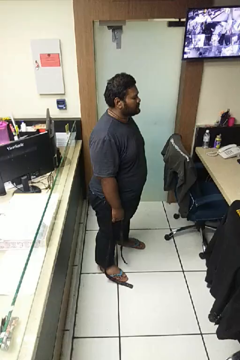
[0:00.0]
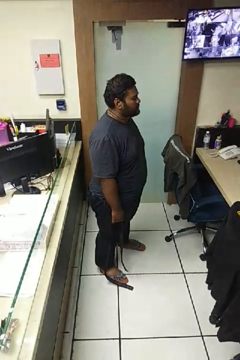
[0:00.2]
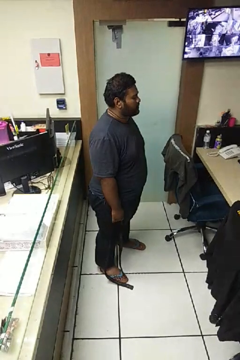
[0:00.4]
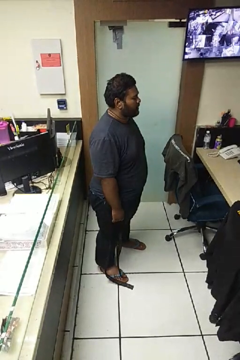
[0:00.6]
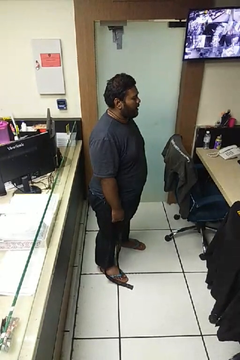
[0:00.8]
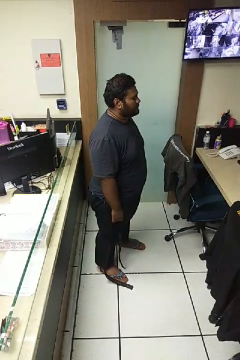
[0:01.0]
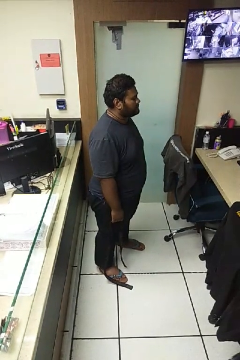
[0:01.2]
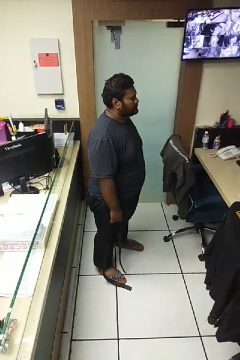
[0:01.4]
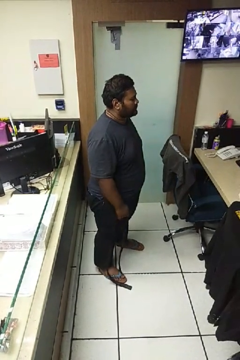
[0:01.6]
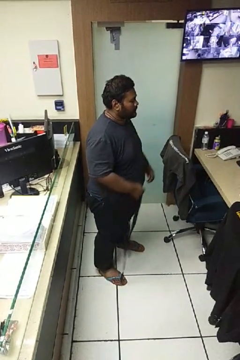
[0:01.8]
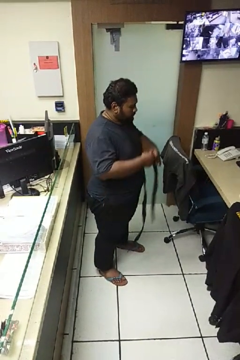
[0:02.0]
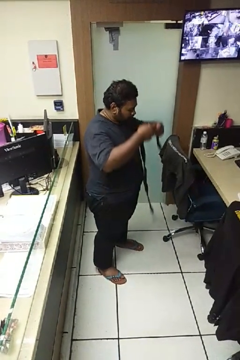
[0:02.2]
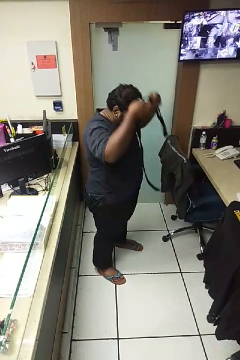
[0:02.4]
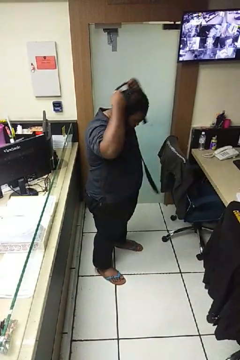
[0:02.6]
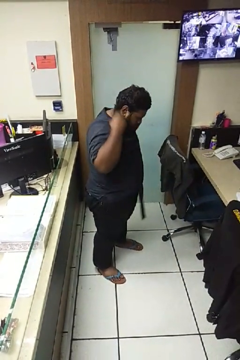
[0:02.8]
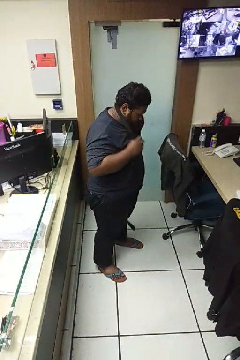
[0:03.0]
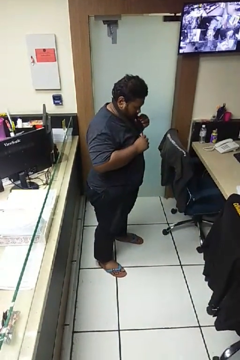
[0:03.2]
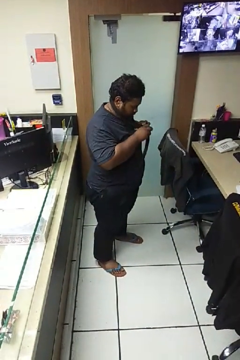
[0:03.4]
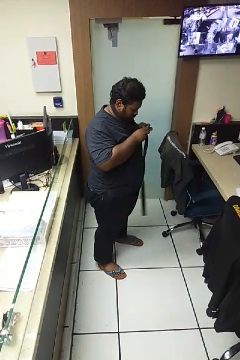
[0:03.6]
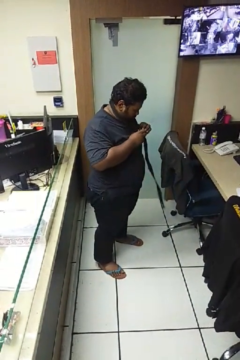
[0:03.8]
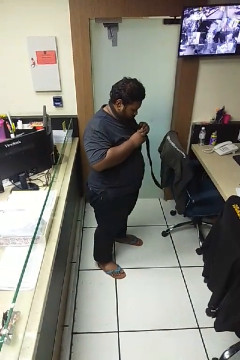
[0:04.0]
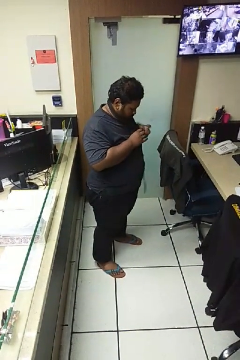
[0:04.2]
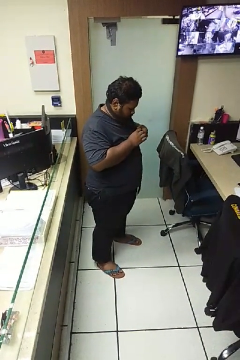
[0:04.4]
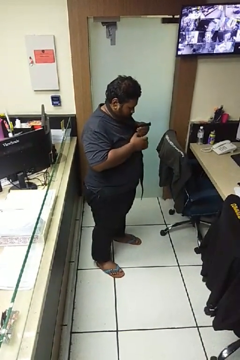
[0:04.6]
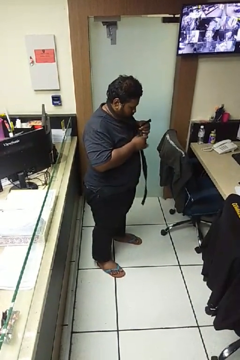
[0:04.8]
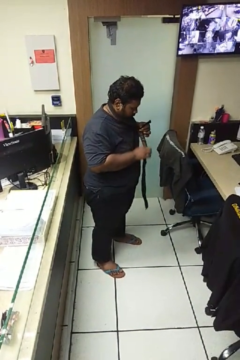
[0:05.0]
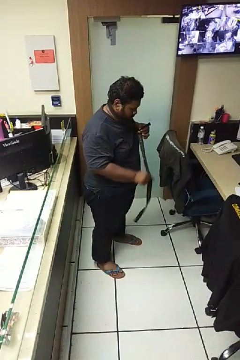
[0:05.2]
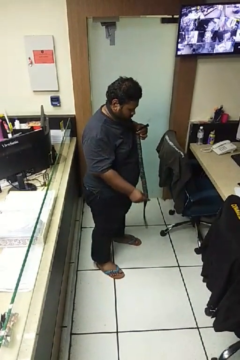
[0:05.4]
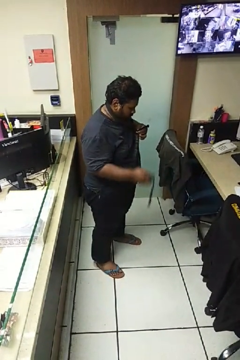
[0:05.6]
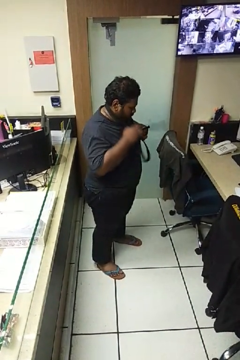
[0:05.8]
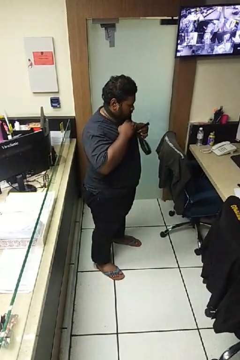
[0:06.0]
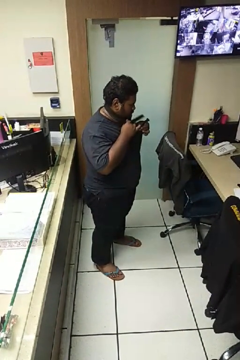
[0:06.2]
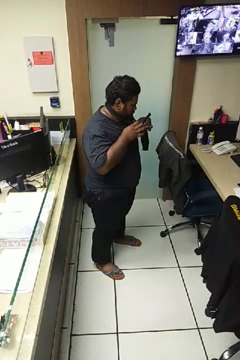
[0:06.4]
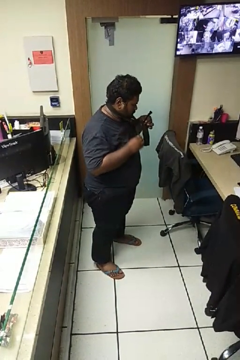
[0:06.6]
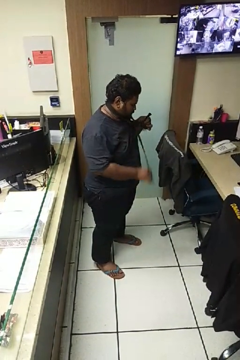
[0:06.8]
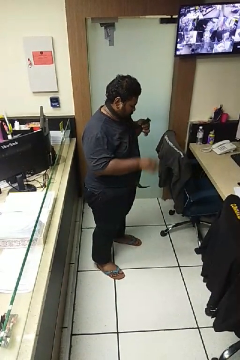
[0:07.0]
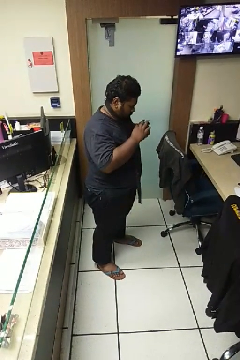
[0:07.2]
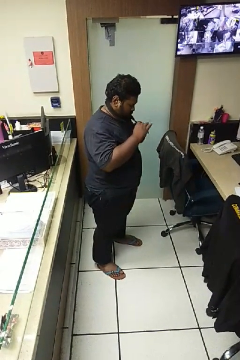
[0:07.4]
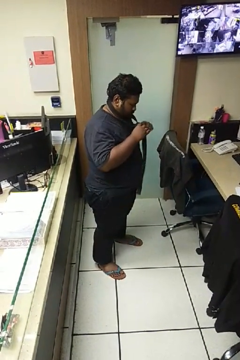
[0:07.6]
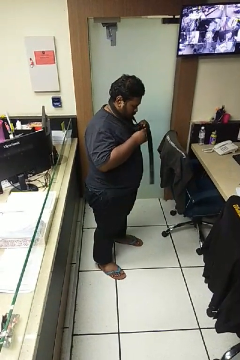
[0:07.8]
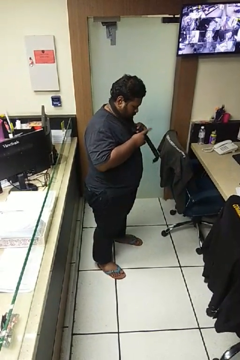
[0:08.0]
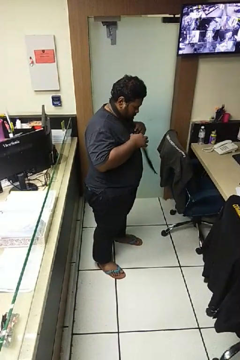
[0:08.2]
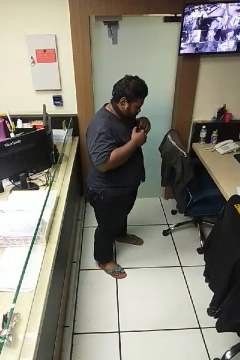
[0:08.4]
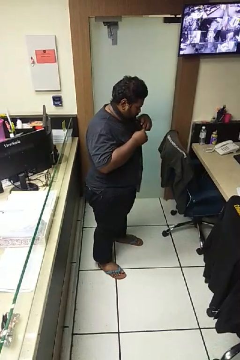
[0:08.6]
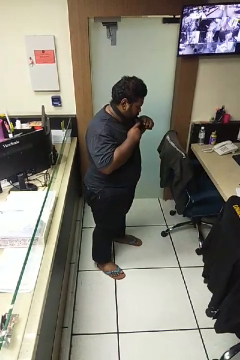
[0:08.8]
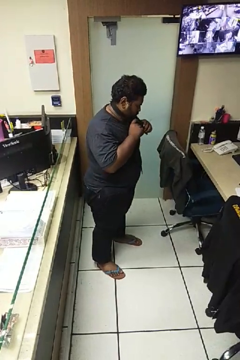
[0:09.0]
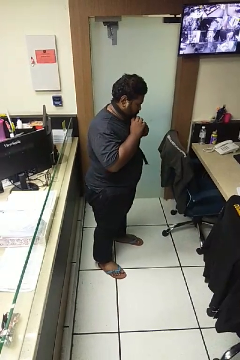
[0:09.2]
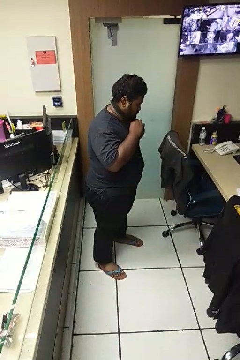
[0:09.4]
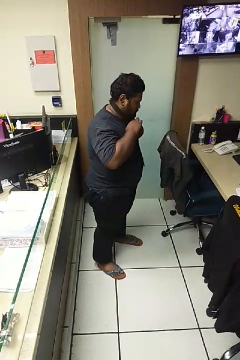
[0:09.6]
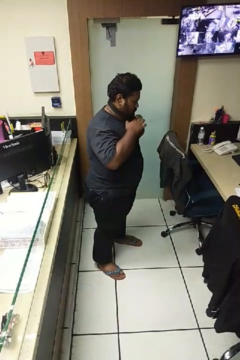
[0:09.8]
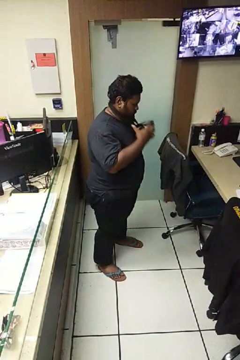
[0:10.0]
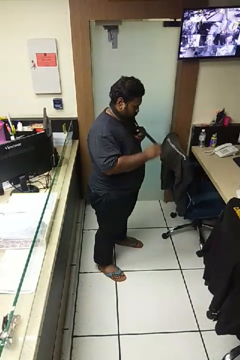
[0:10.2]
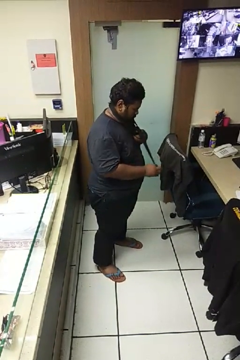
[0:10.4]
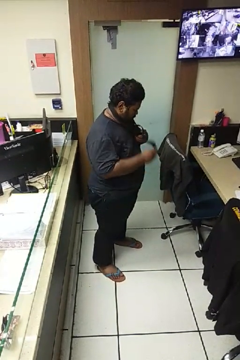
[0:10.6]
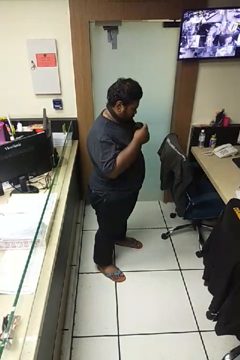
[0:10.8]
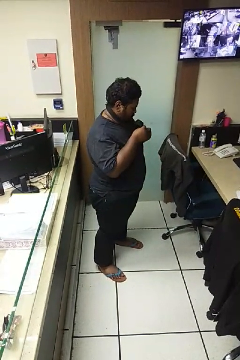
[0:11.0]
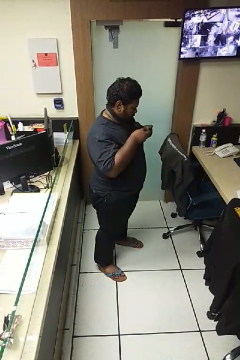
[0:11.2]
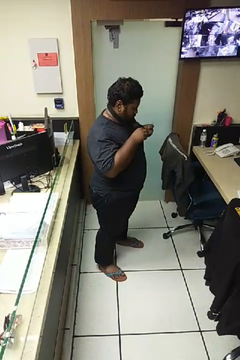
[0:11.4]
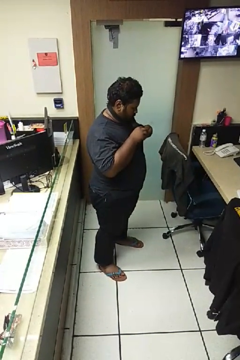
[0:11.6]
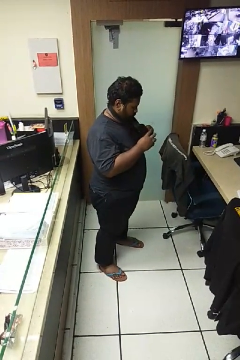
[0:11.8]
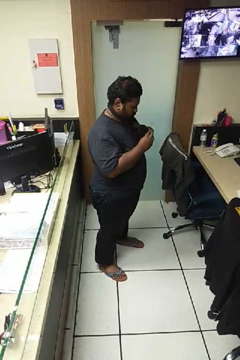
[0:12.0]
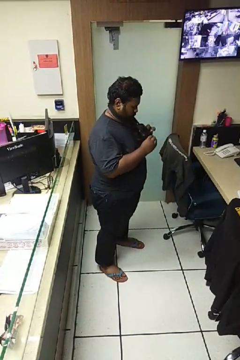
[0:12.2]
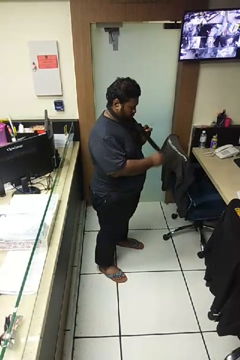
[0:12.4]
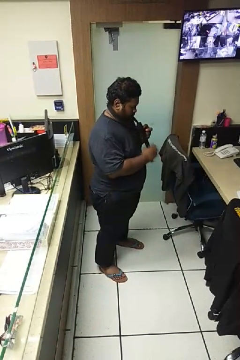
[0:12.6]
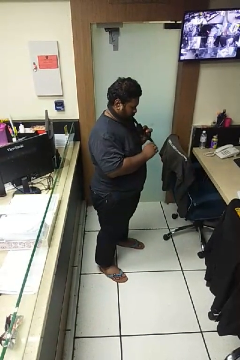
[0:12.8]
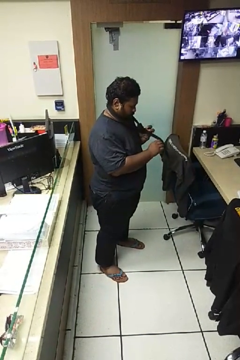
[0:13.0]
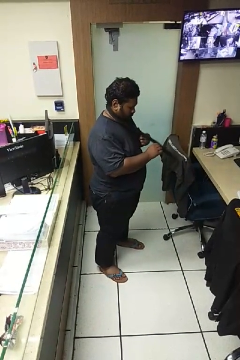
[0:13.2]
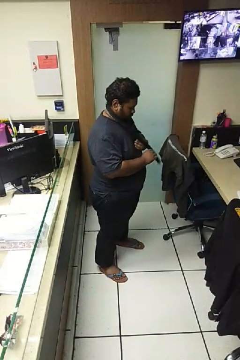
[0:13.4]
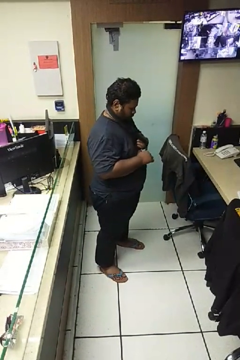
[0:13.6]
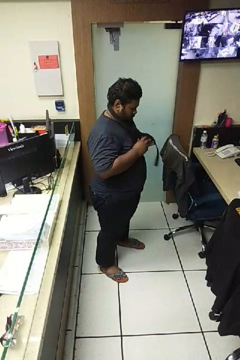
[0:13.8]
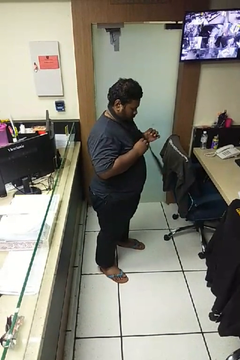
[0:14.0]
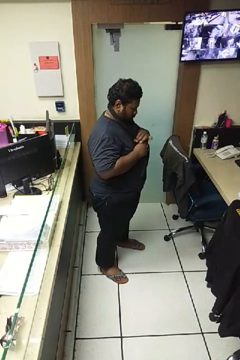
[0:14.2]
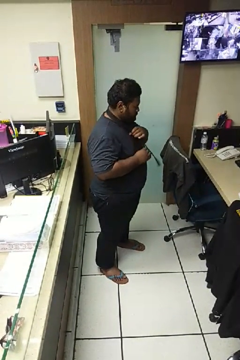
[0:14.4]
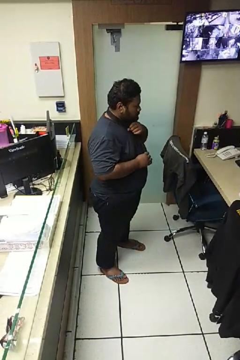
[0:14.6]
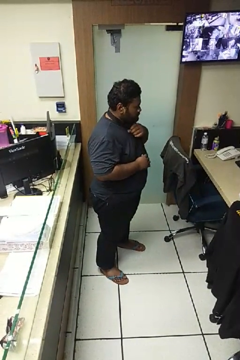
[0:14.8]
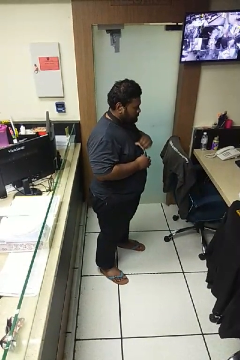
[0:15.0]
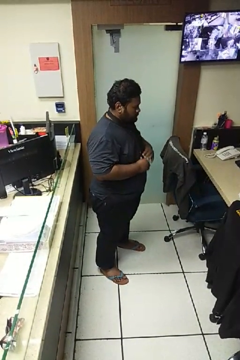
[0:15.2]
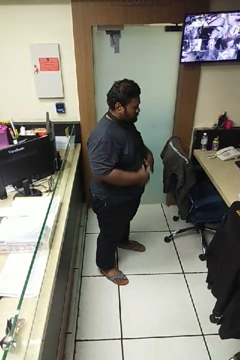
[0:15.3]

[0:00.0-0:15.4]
person puts on necktie

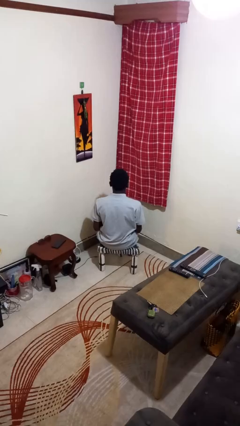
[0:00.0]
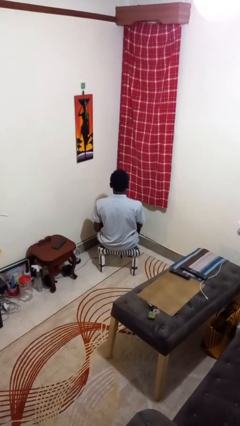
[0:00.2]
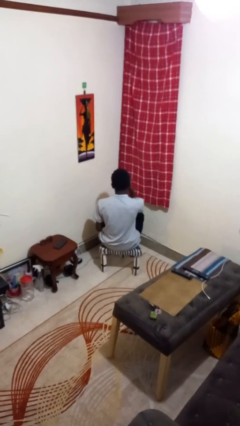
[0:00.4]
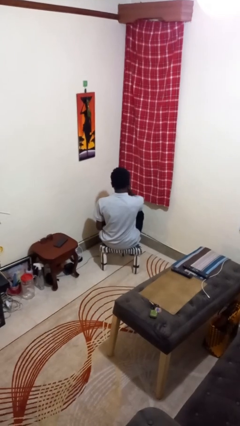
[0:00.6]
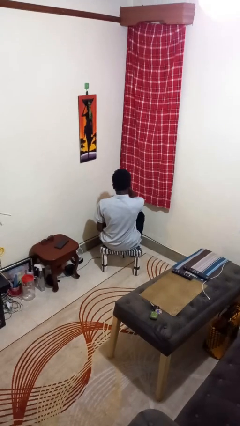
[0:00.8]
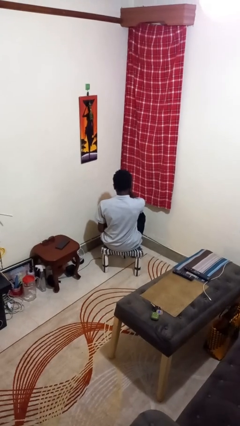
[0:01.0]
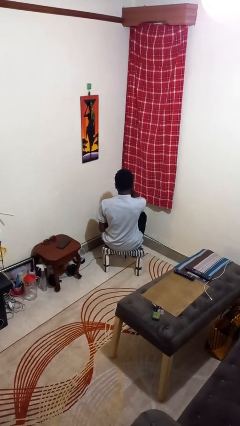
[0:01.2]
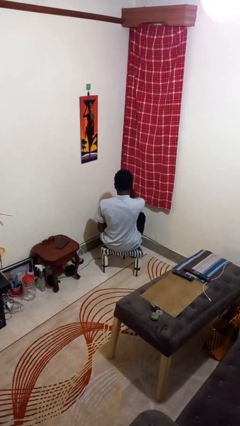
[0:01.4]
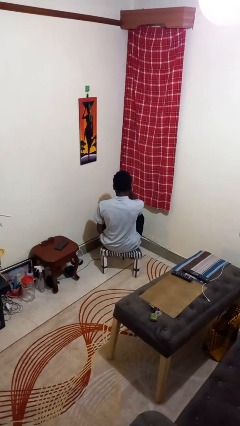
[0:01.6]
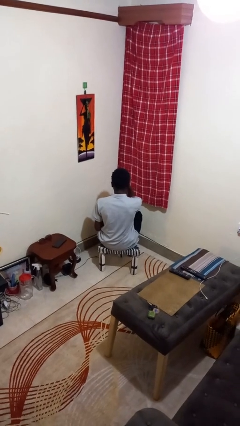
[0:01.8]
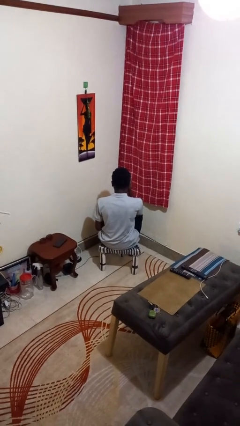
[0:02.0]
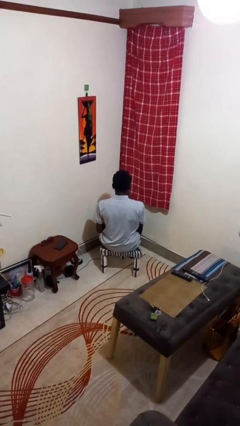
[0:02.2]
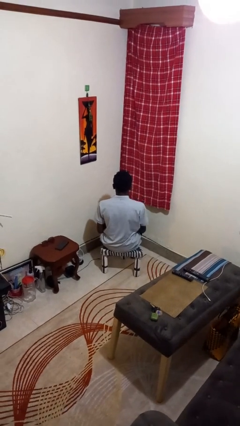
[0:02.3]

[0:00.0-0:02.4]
person scratches face

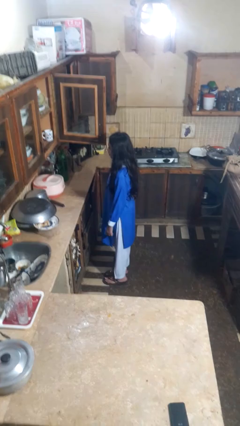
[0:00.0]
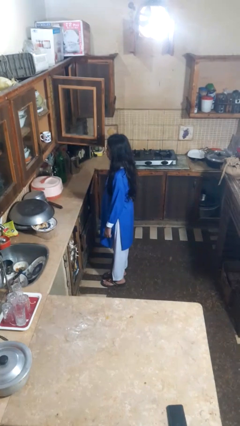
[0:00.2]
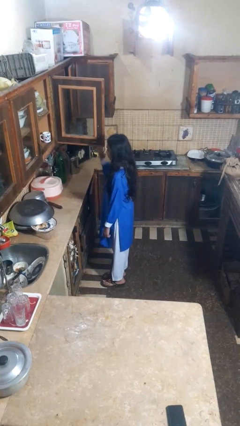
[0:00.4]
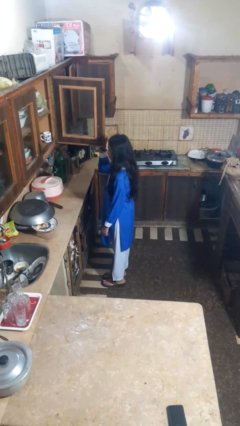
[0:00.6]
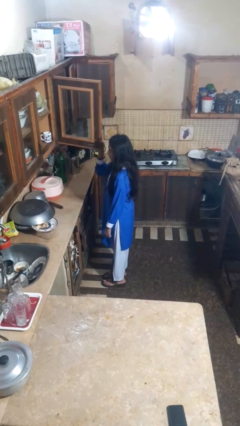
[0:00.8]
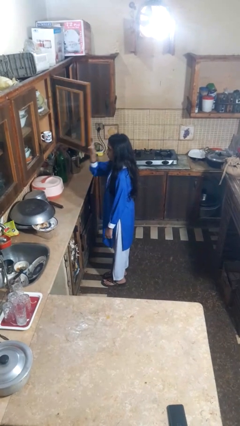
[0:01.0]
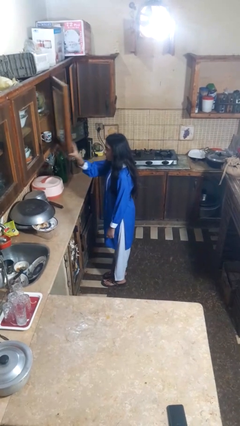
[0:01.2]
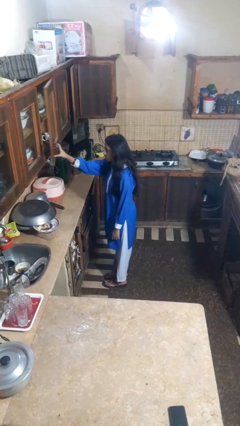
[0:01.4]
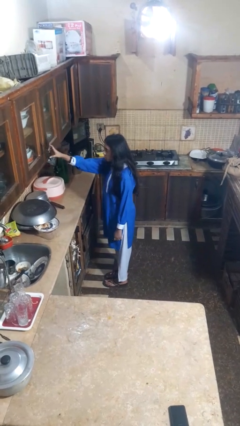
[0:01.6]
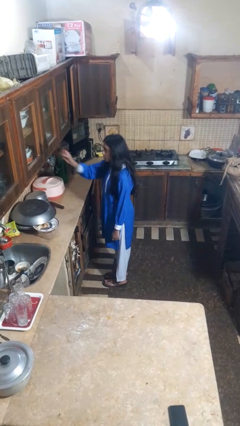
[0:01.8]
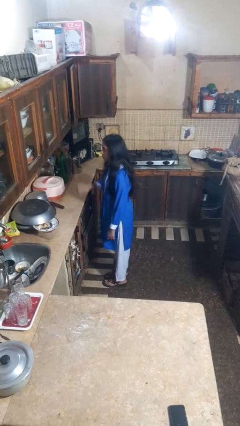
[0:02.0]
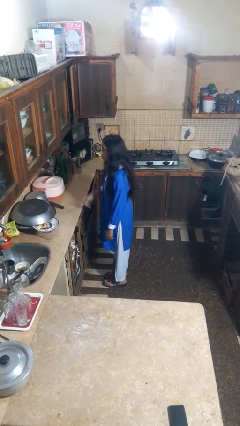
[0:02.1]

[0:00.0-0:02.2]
person closes cabinet

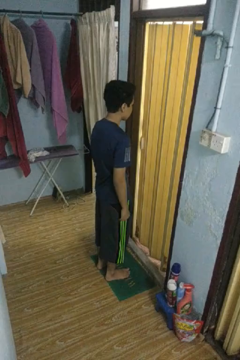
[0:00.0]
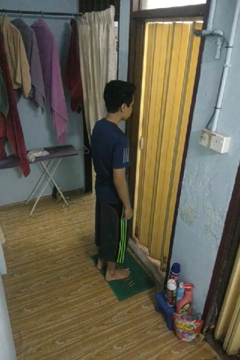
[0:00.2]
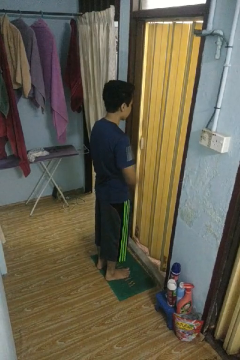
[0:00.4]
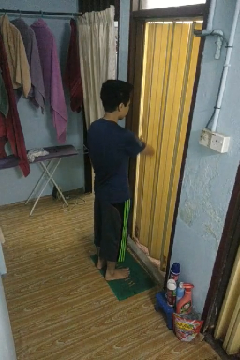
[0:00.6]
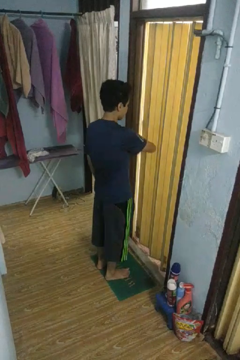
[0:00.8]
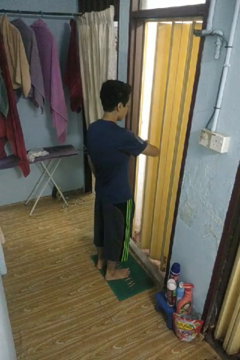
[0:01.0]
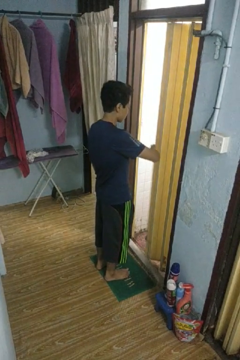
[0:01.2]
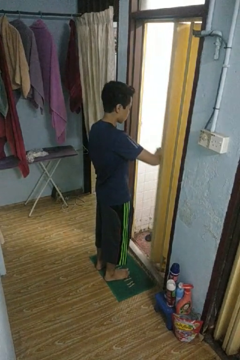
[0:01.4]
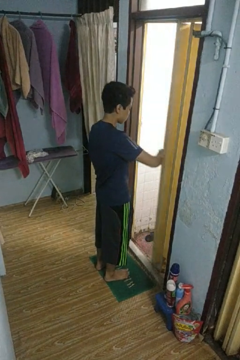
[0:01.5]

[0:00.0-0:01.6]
person opens sliding door
